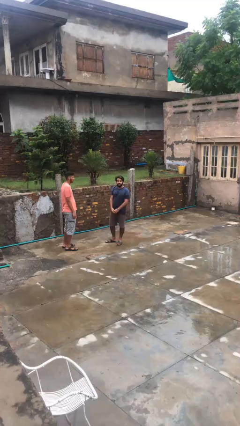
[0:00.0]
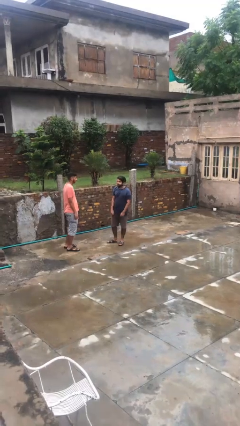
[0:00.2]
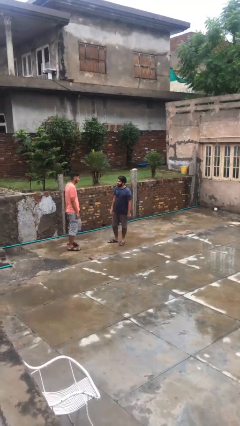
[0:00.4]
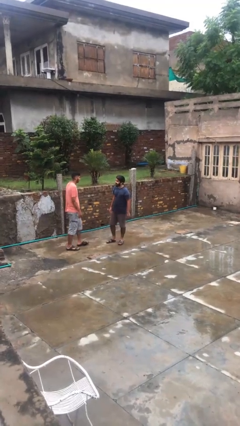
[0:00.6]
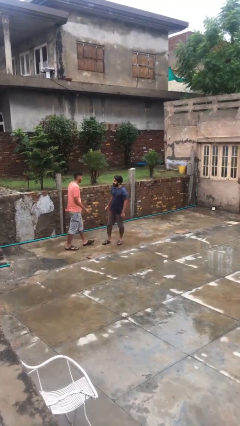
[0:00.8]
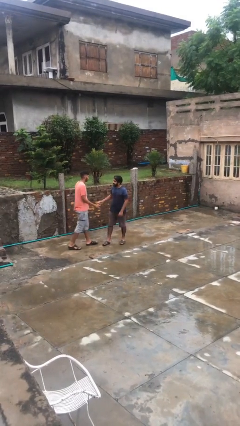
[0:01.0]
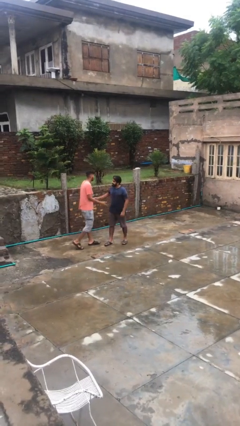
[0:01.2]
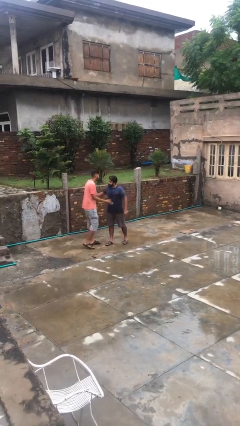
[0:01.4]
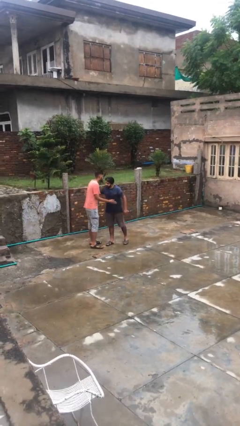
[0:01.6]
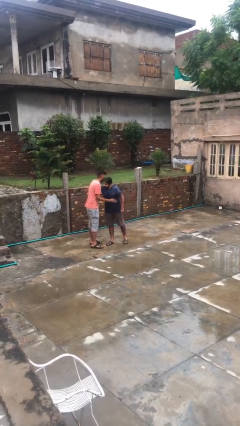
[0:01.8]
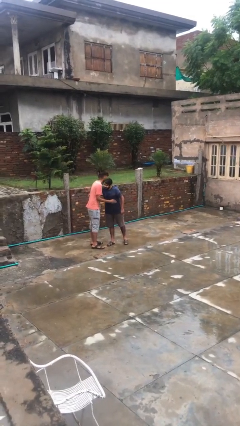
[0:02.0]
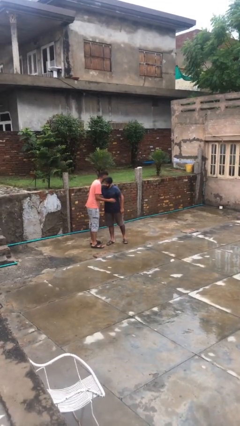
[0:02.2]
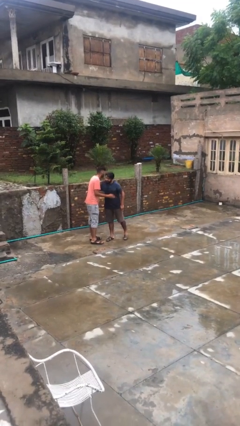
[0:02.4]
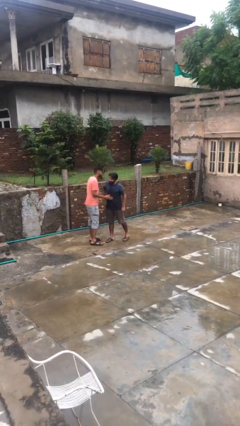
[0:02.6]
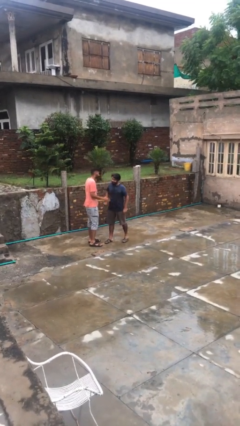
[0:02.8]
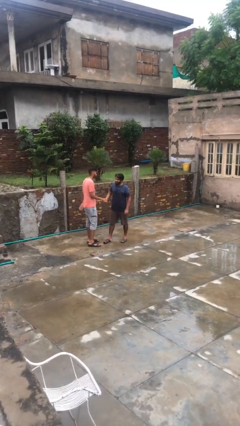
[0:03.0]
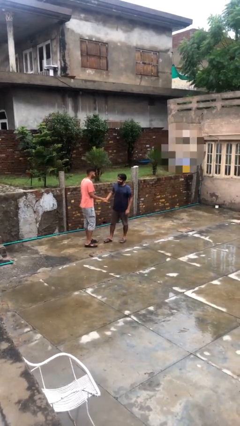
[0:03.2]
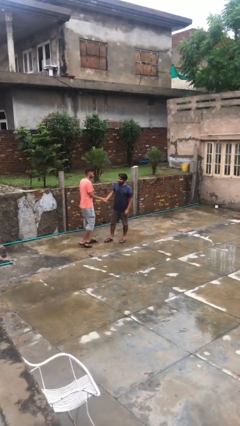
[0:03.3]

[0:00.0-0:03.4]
person embraces person

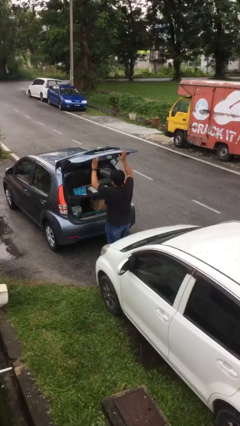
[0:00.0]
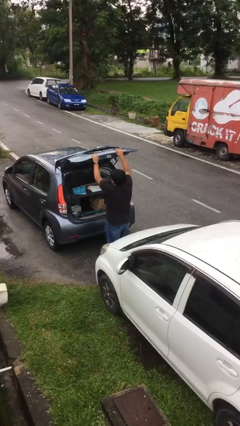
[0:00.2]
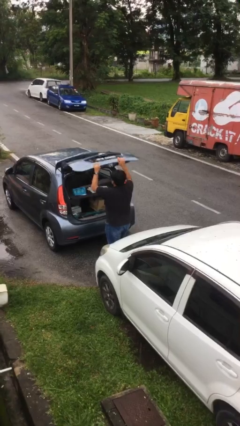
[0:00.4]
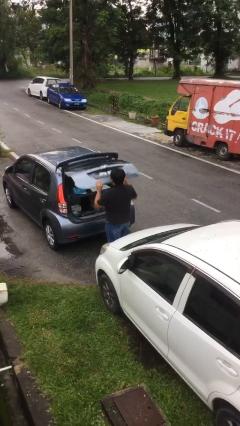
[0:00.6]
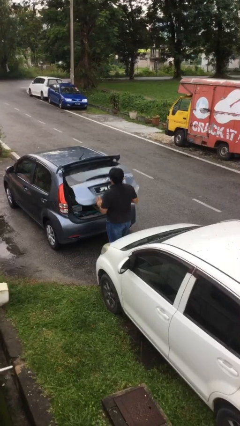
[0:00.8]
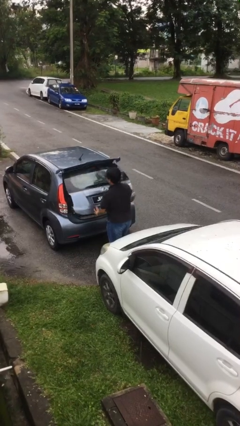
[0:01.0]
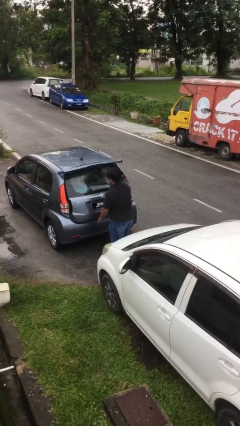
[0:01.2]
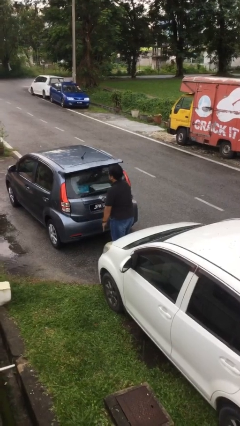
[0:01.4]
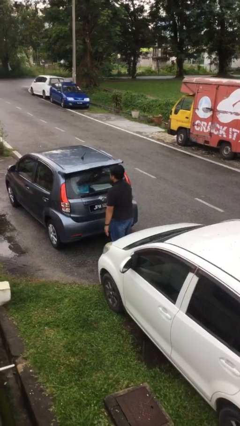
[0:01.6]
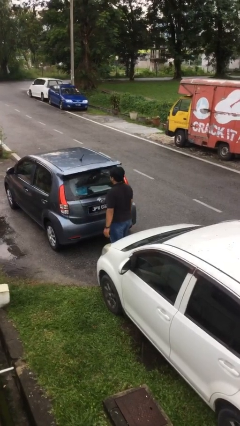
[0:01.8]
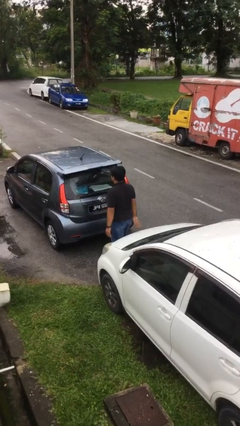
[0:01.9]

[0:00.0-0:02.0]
person closes car trunk

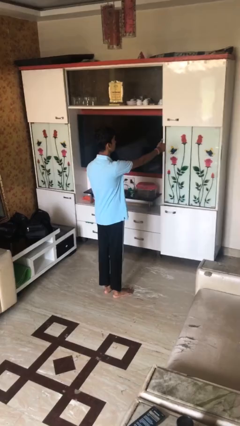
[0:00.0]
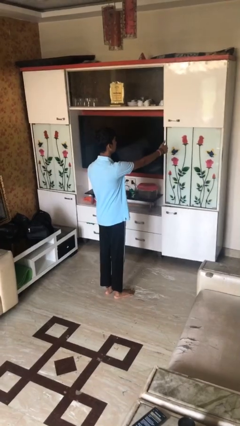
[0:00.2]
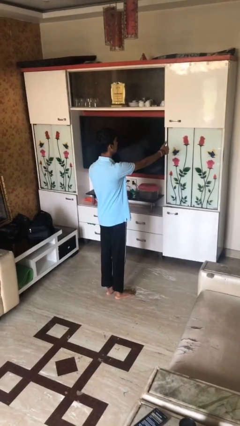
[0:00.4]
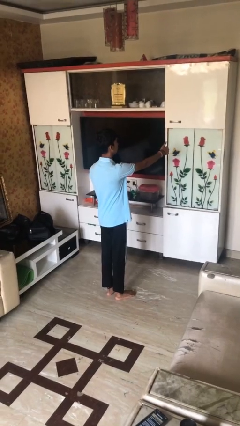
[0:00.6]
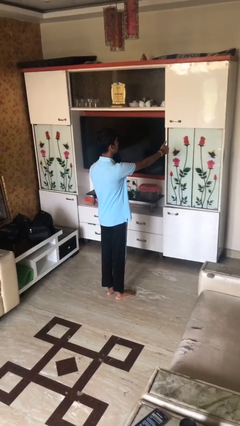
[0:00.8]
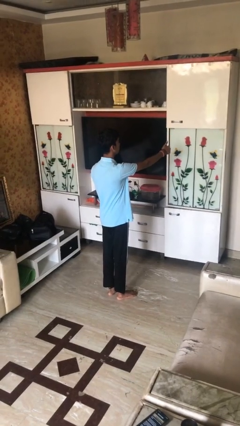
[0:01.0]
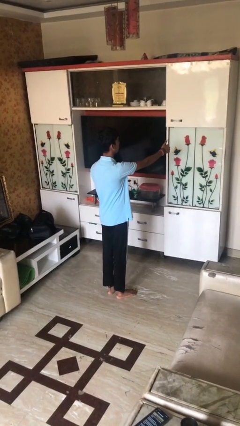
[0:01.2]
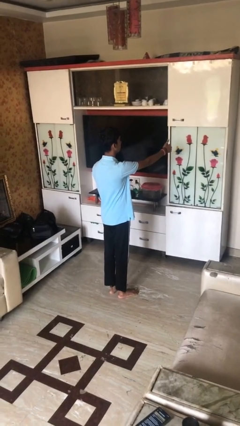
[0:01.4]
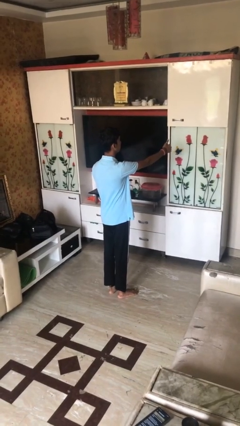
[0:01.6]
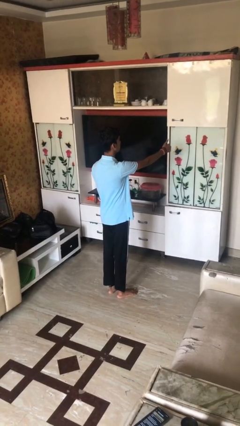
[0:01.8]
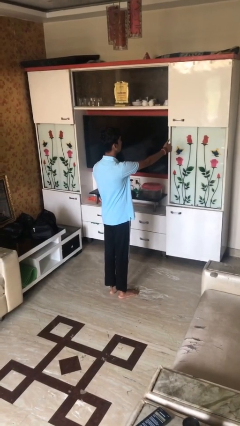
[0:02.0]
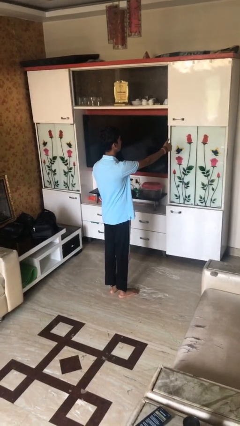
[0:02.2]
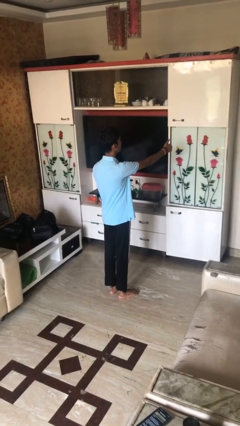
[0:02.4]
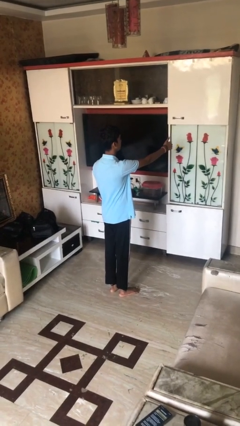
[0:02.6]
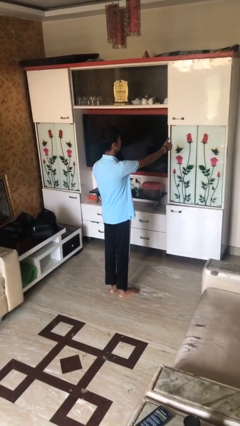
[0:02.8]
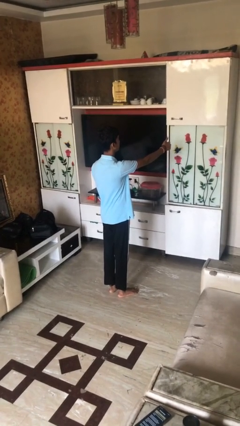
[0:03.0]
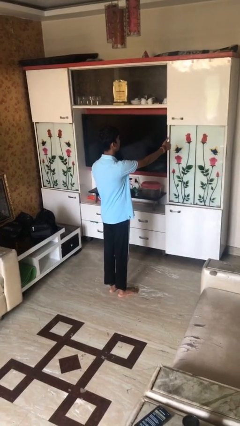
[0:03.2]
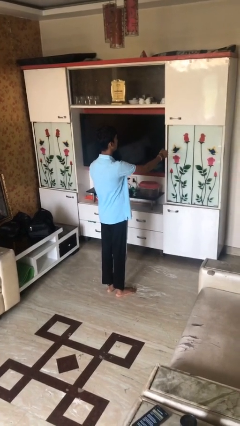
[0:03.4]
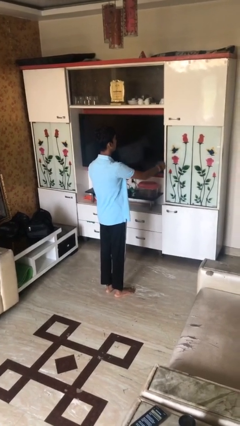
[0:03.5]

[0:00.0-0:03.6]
person gestures thumbs up

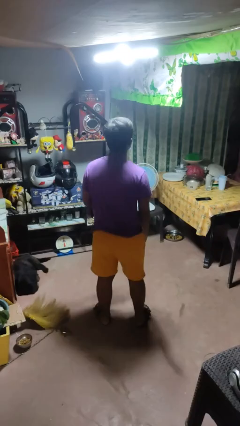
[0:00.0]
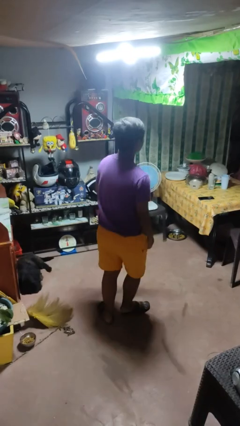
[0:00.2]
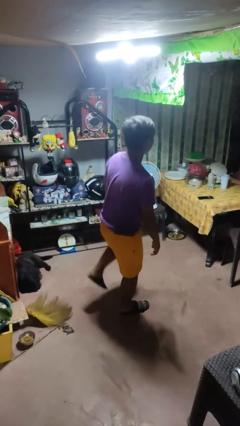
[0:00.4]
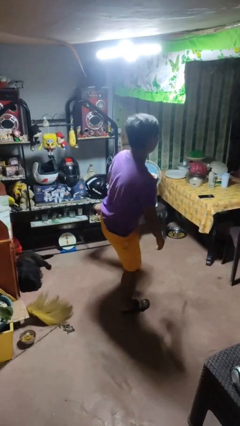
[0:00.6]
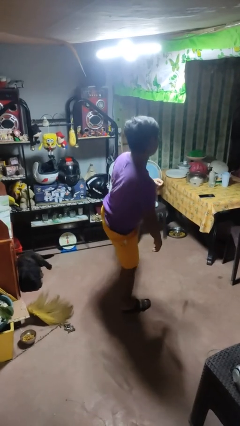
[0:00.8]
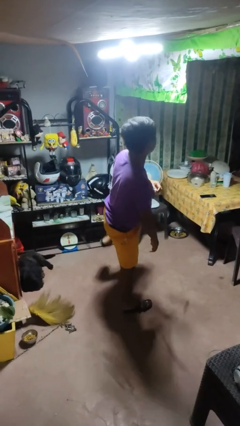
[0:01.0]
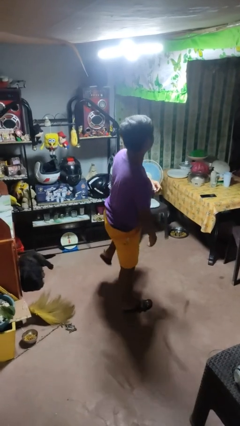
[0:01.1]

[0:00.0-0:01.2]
person karate kicks

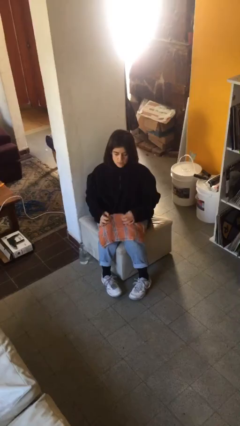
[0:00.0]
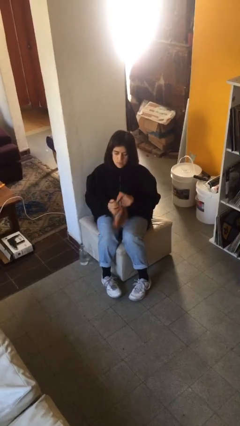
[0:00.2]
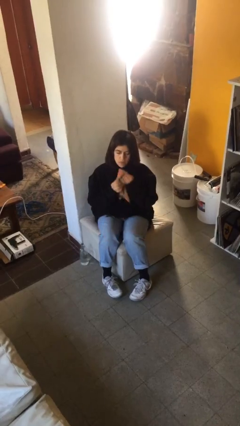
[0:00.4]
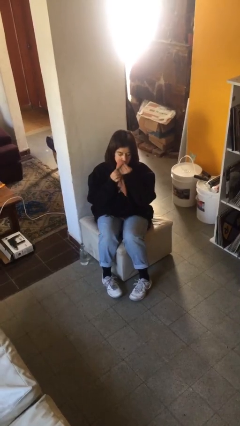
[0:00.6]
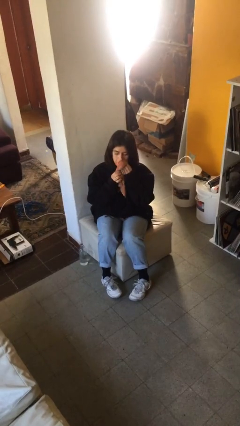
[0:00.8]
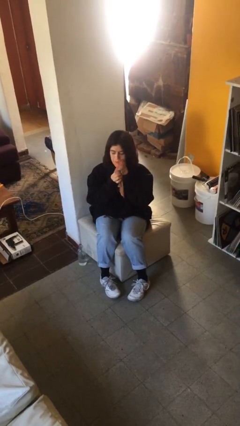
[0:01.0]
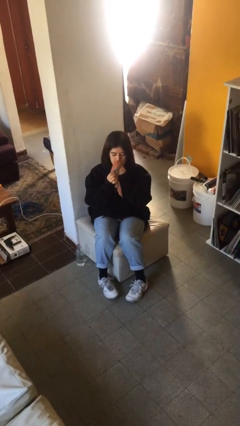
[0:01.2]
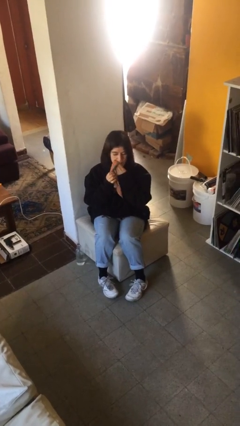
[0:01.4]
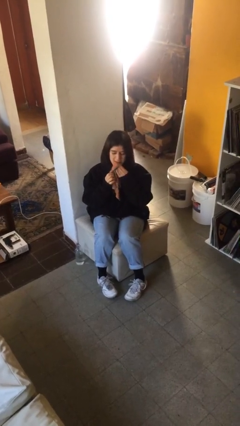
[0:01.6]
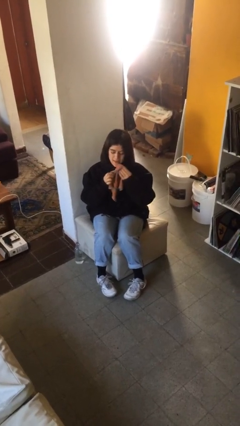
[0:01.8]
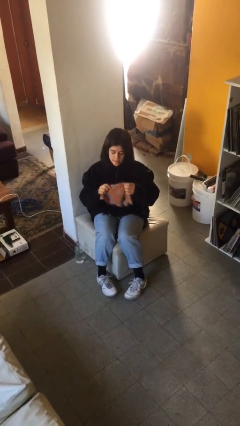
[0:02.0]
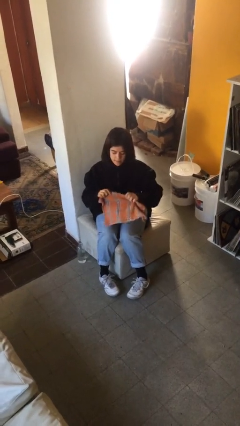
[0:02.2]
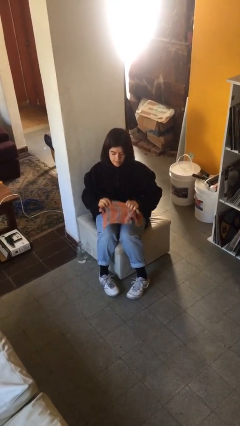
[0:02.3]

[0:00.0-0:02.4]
person wipes mouth with napkin

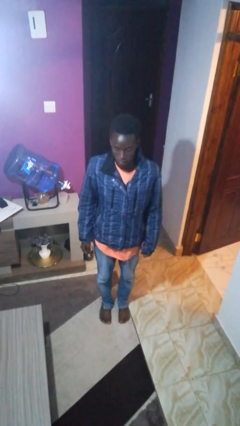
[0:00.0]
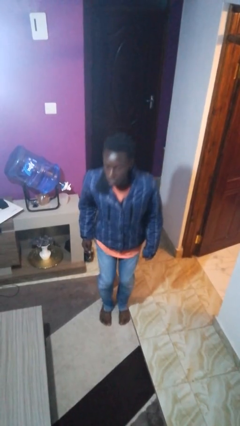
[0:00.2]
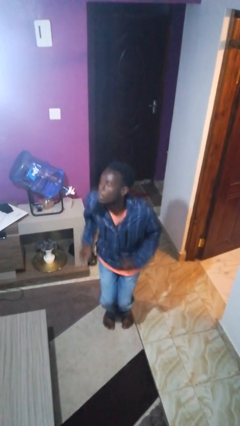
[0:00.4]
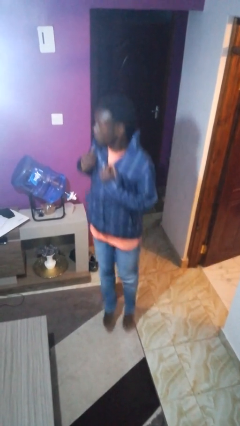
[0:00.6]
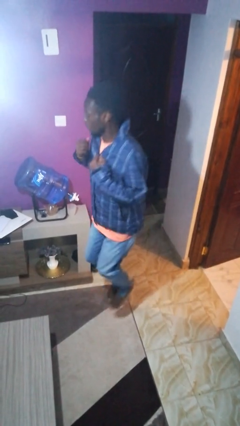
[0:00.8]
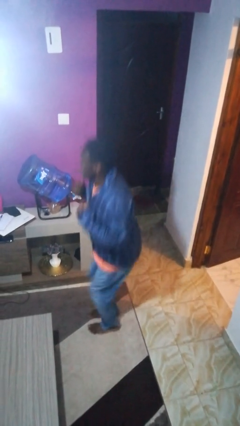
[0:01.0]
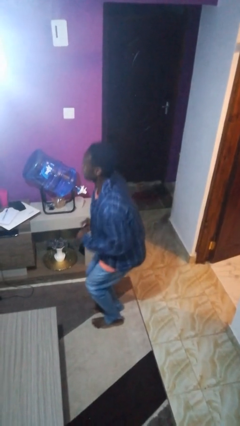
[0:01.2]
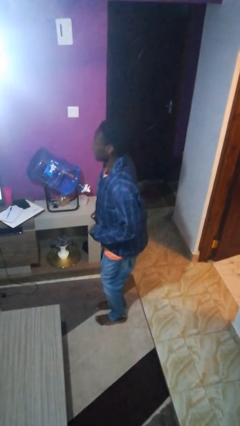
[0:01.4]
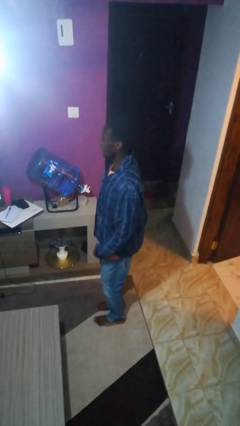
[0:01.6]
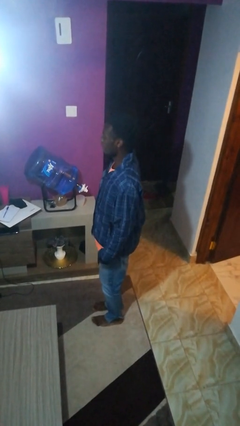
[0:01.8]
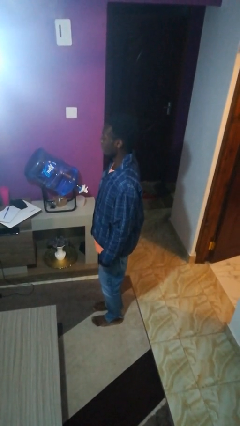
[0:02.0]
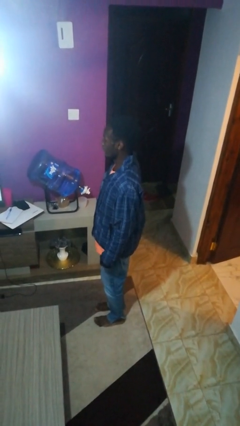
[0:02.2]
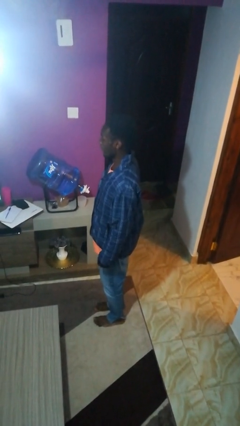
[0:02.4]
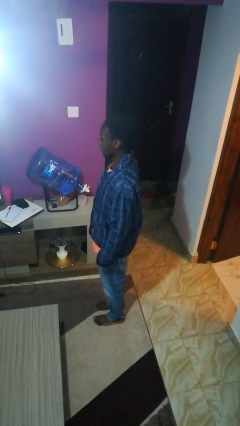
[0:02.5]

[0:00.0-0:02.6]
person jumps

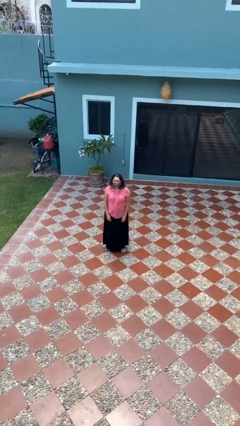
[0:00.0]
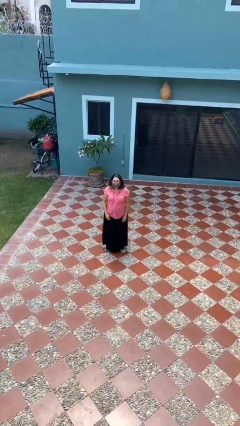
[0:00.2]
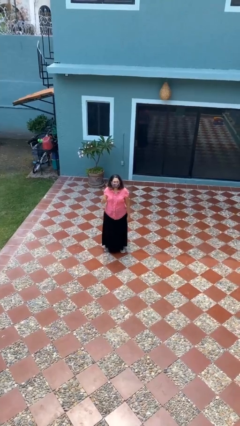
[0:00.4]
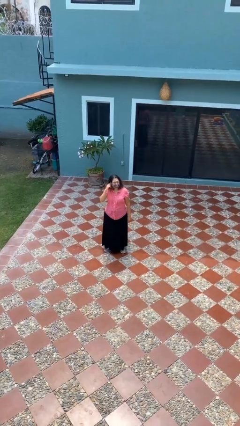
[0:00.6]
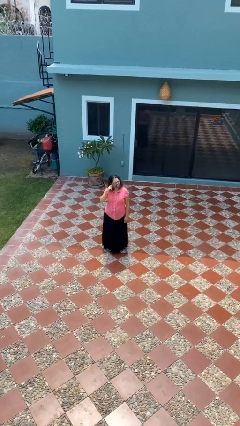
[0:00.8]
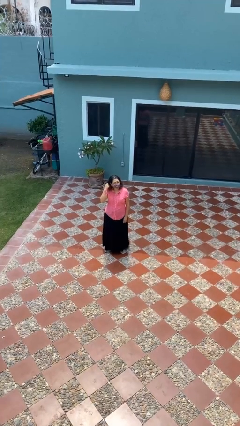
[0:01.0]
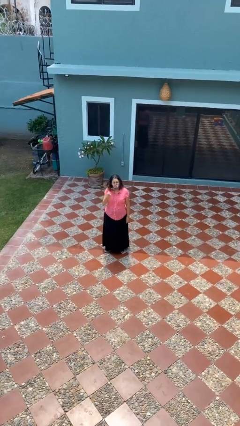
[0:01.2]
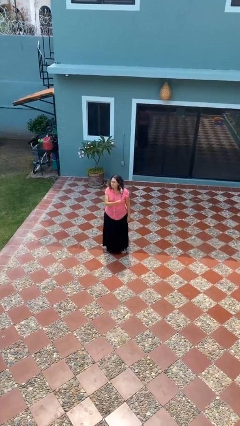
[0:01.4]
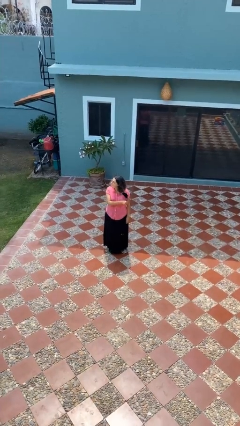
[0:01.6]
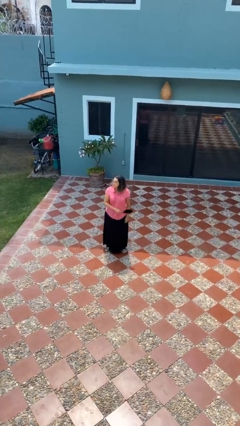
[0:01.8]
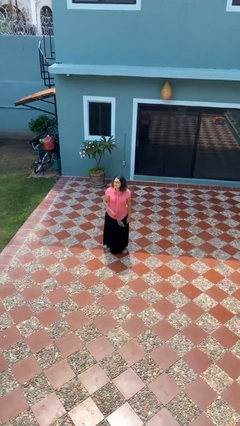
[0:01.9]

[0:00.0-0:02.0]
person takes off facemask
